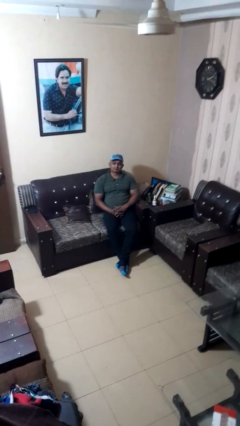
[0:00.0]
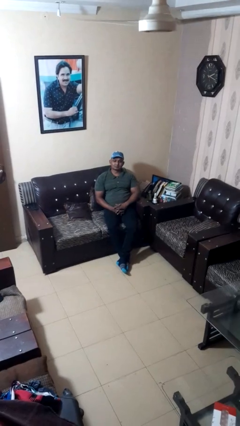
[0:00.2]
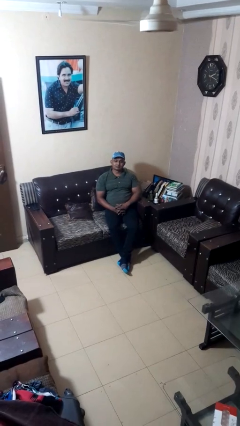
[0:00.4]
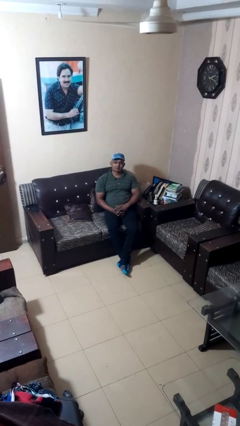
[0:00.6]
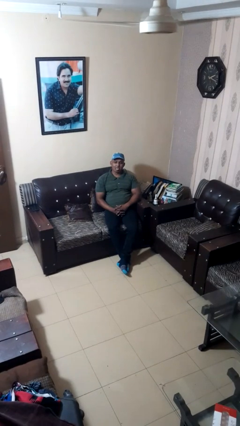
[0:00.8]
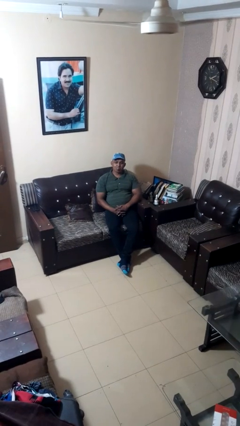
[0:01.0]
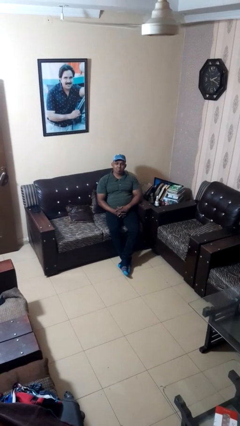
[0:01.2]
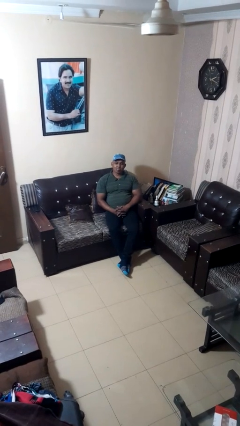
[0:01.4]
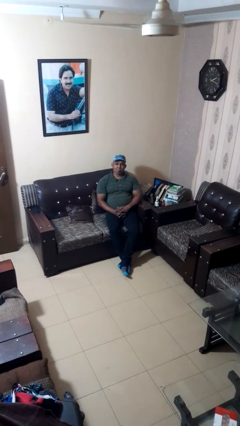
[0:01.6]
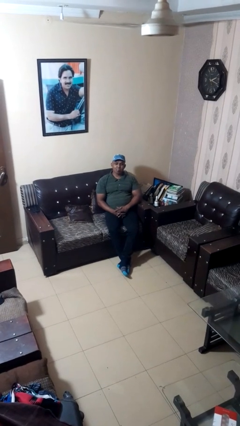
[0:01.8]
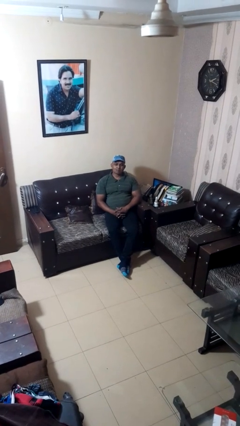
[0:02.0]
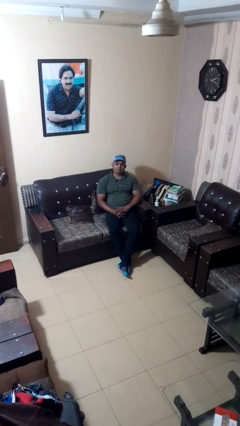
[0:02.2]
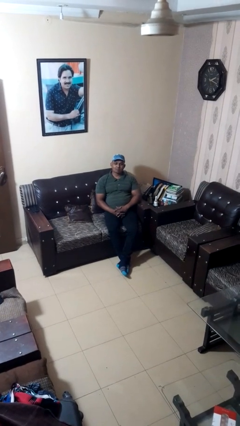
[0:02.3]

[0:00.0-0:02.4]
person sticks out tongue

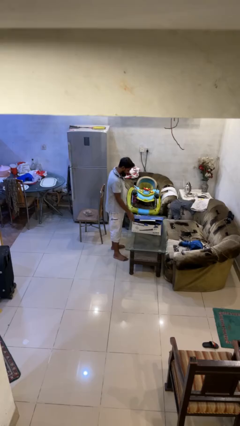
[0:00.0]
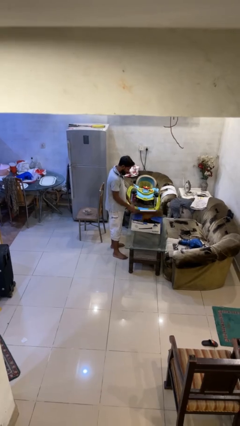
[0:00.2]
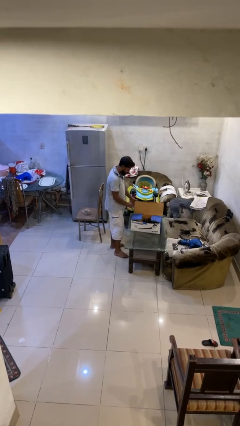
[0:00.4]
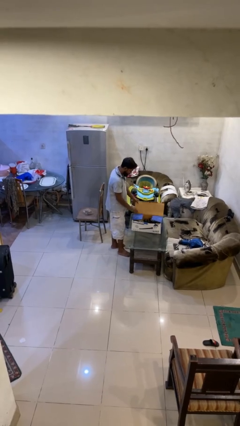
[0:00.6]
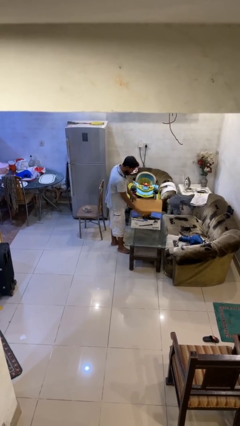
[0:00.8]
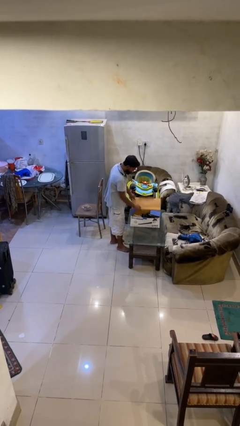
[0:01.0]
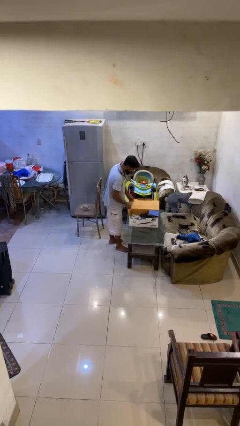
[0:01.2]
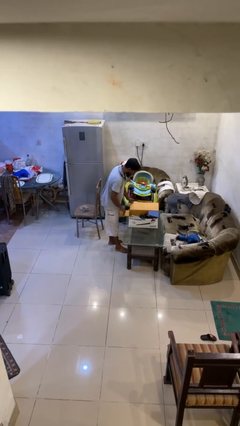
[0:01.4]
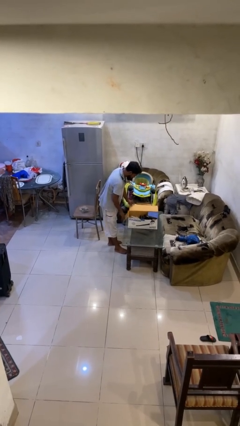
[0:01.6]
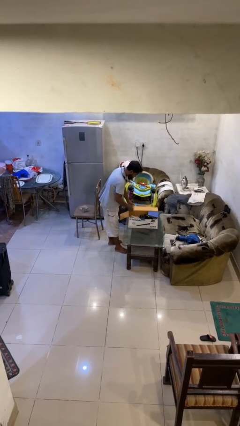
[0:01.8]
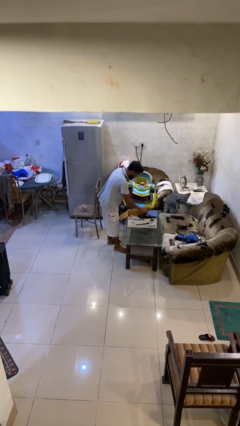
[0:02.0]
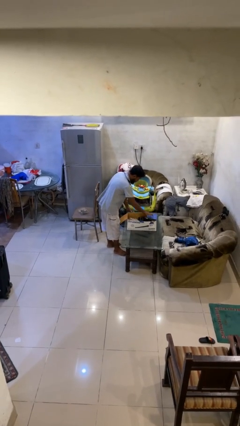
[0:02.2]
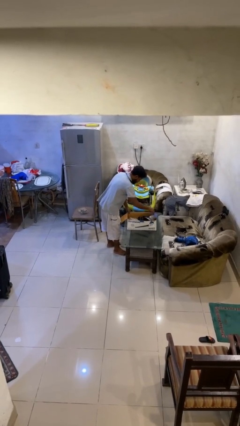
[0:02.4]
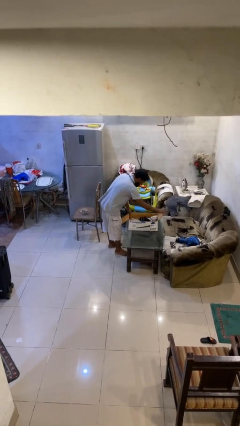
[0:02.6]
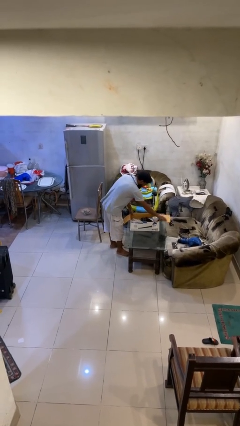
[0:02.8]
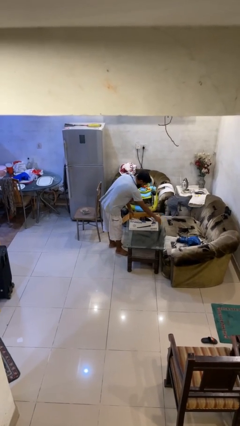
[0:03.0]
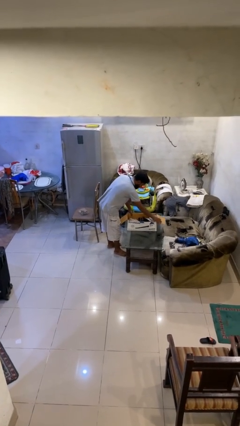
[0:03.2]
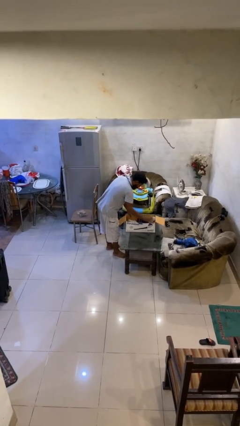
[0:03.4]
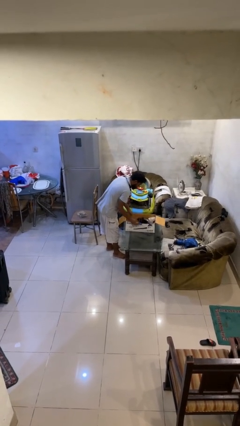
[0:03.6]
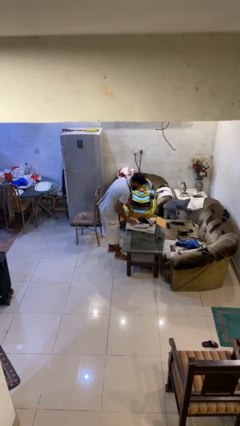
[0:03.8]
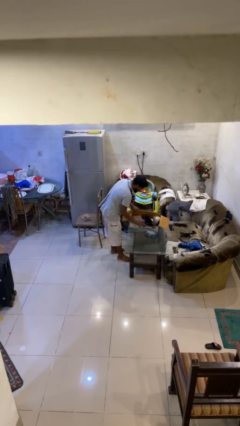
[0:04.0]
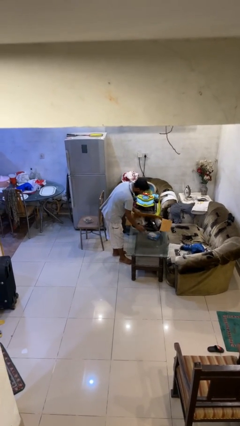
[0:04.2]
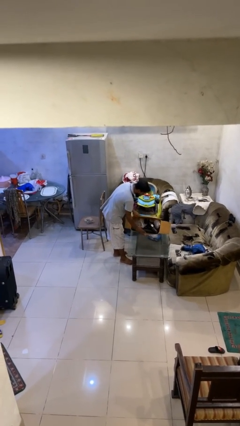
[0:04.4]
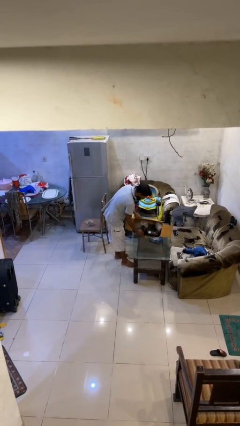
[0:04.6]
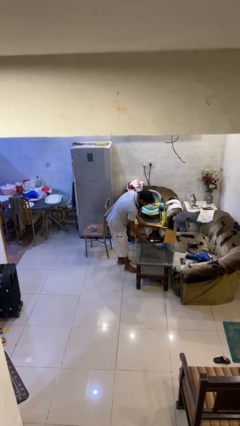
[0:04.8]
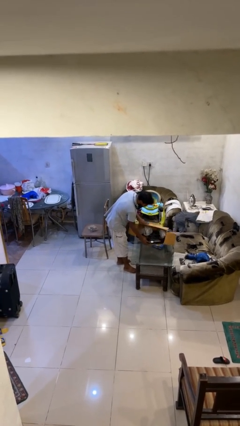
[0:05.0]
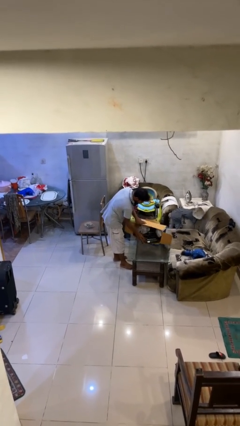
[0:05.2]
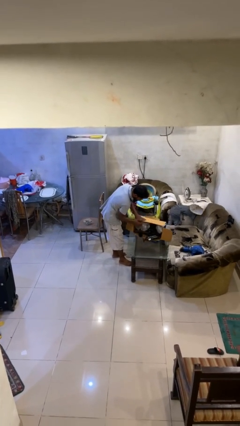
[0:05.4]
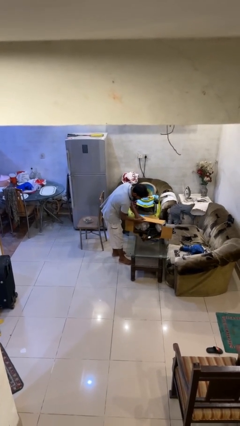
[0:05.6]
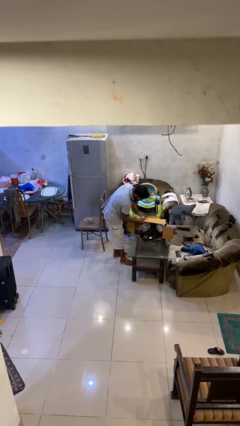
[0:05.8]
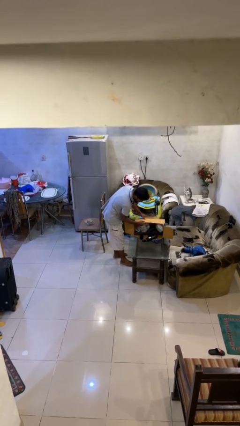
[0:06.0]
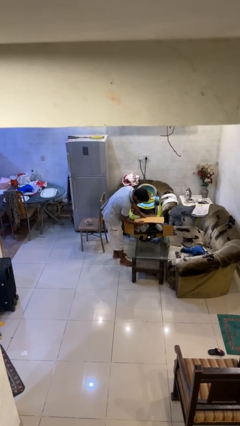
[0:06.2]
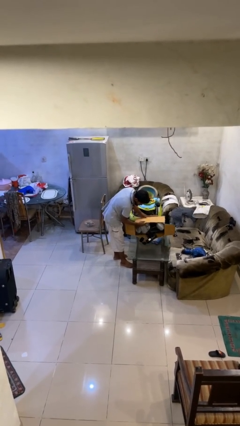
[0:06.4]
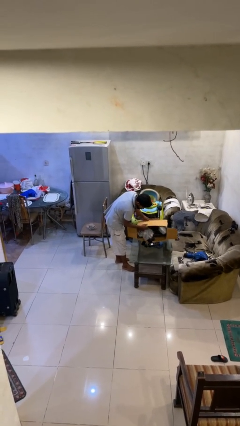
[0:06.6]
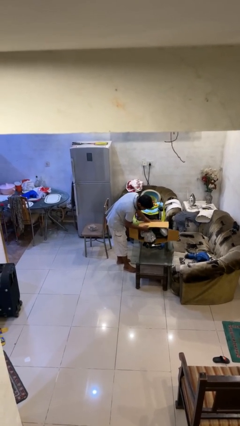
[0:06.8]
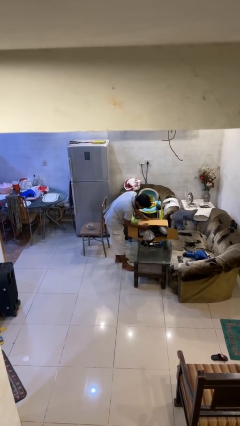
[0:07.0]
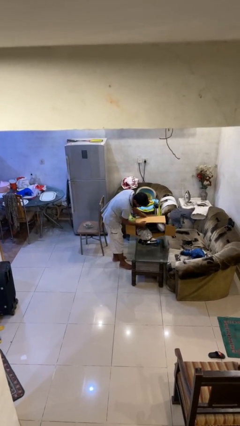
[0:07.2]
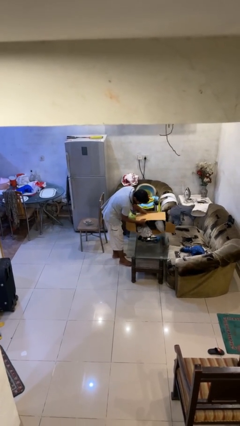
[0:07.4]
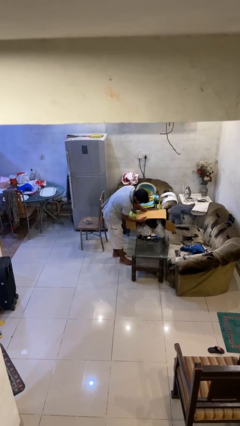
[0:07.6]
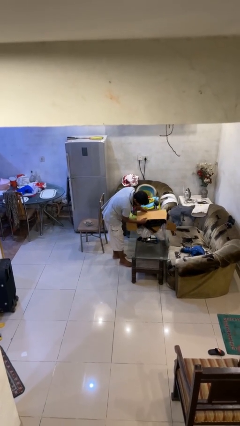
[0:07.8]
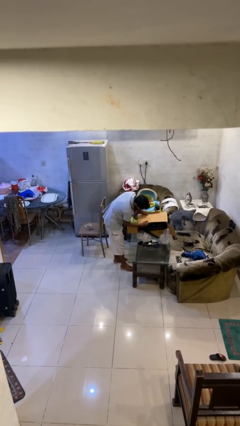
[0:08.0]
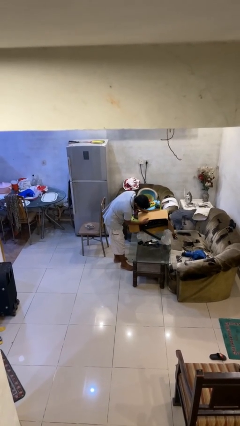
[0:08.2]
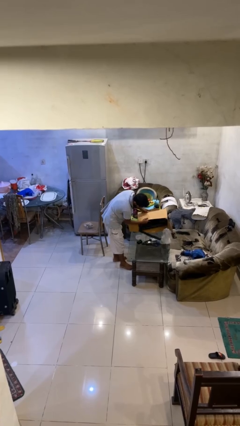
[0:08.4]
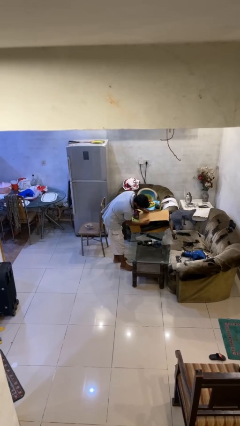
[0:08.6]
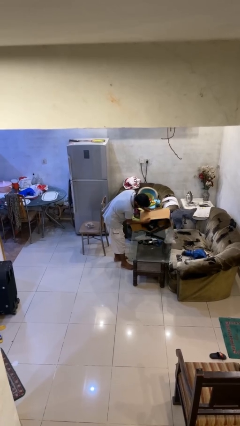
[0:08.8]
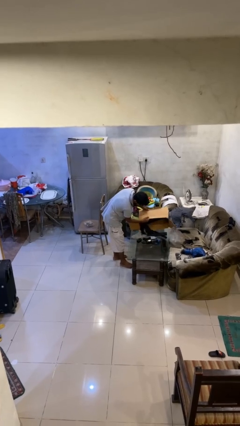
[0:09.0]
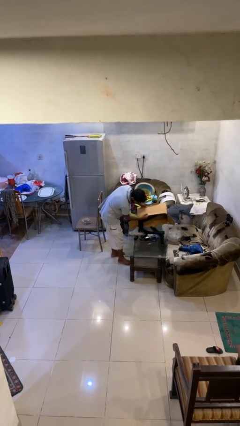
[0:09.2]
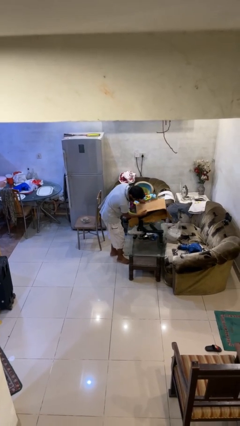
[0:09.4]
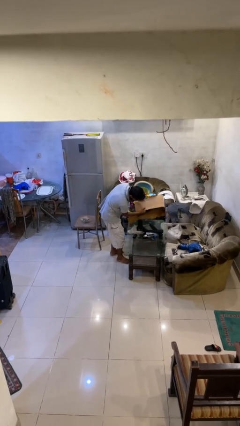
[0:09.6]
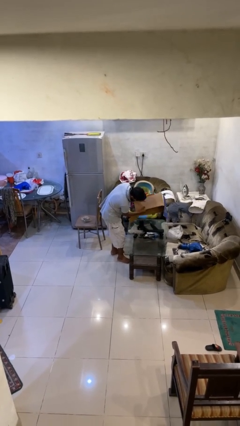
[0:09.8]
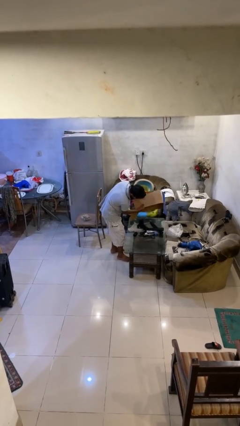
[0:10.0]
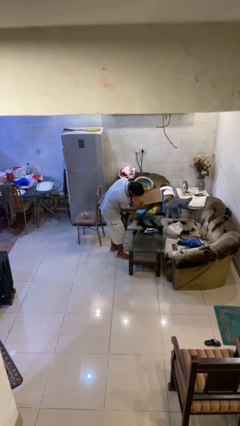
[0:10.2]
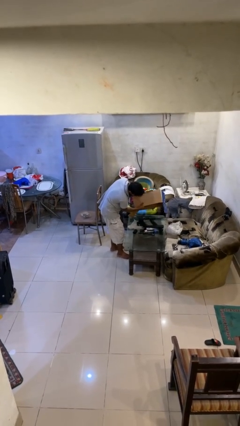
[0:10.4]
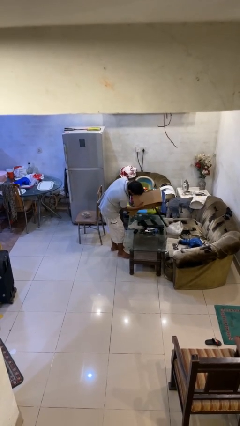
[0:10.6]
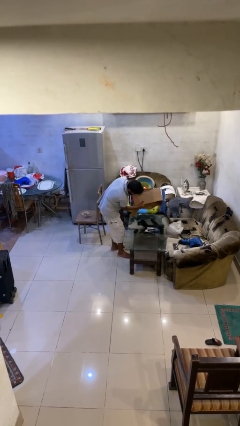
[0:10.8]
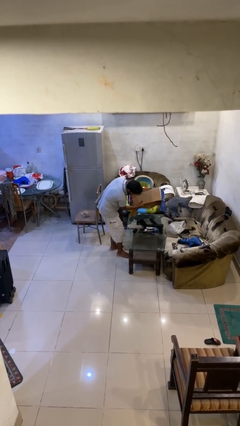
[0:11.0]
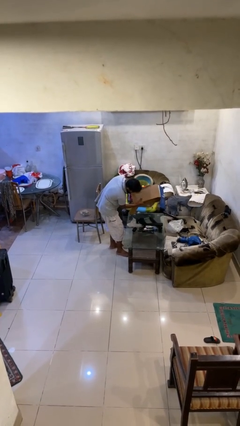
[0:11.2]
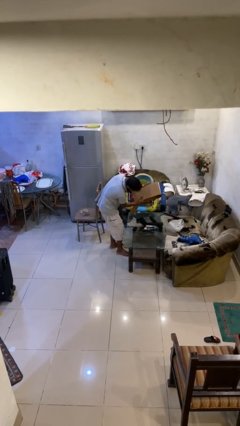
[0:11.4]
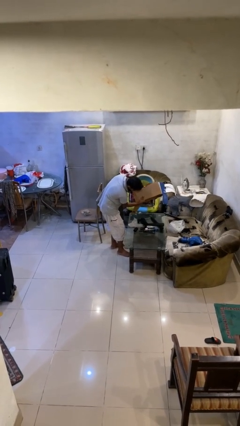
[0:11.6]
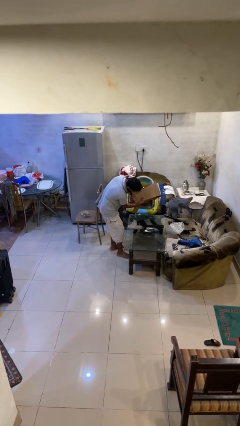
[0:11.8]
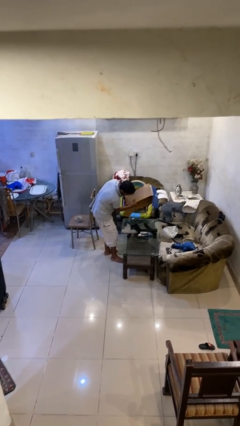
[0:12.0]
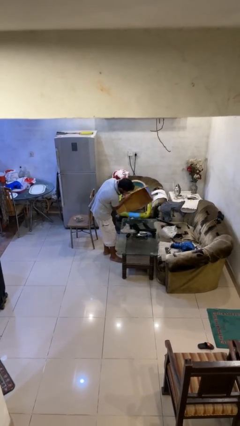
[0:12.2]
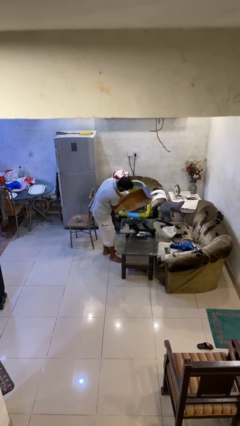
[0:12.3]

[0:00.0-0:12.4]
person unloads box onto table

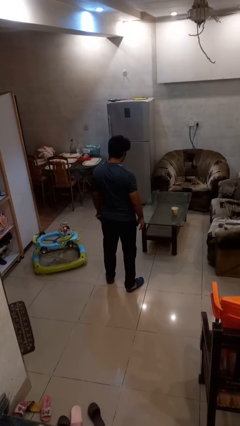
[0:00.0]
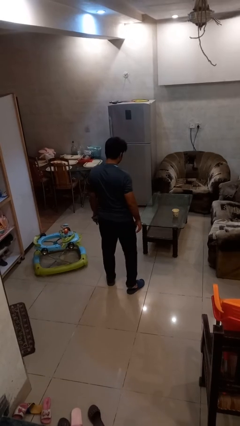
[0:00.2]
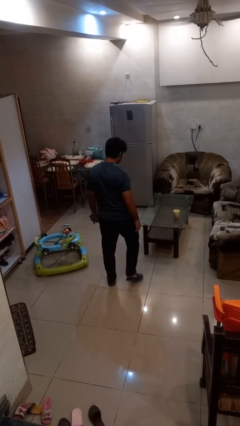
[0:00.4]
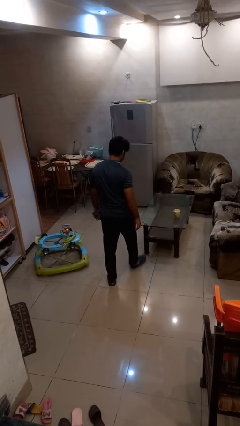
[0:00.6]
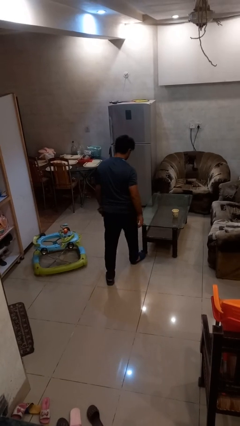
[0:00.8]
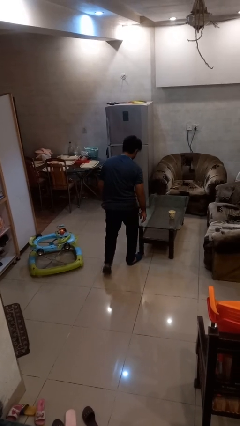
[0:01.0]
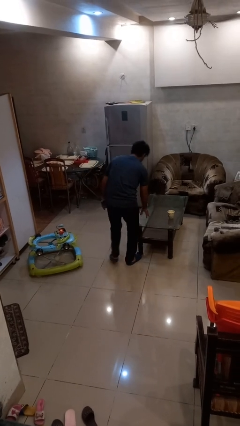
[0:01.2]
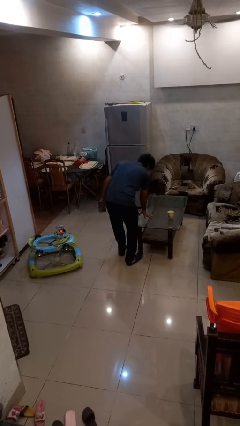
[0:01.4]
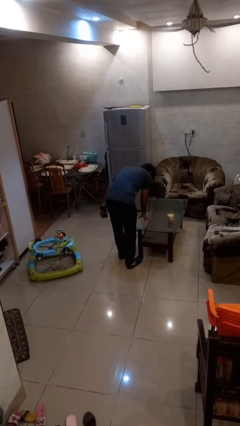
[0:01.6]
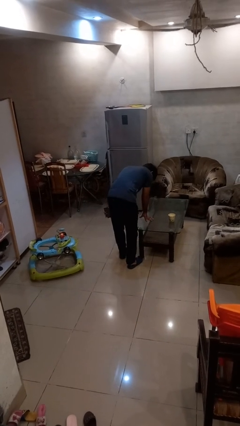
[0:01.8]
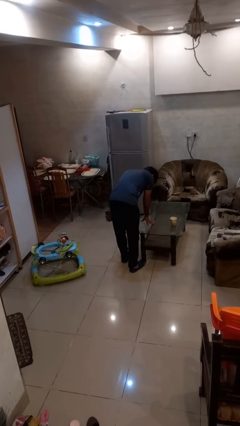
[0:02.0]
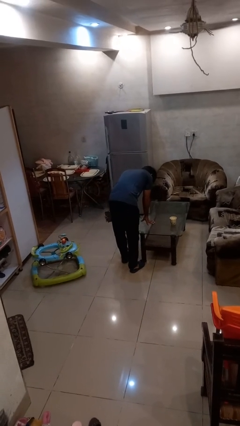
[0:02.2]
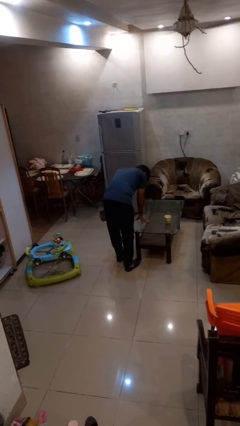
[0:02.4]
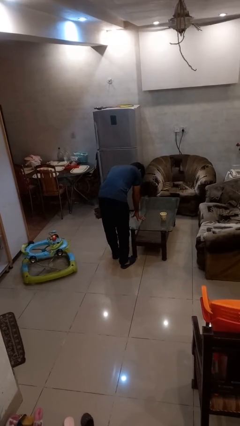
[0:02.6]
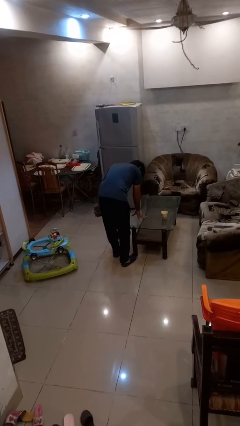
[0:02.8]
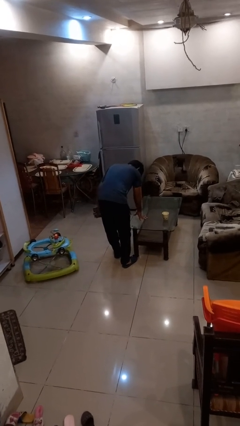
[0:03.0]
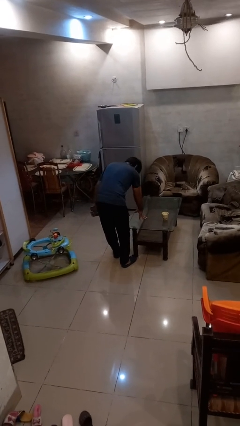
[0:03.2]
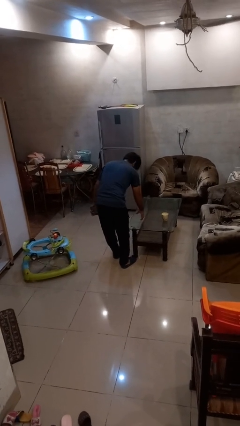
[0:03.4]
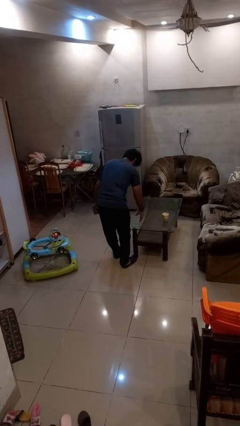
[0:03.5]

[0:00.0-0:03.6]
person bumps into table
